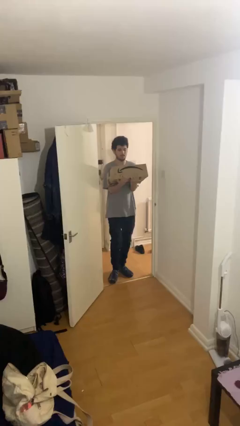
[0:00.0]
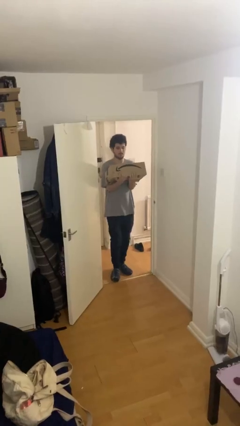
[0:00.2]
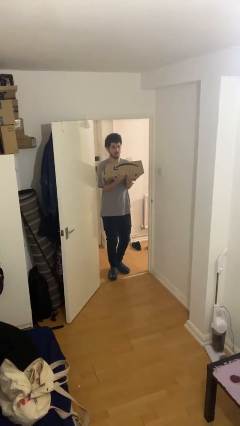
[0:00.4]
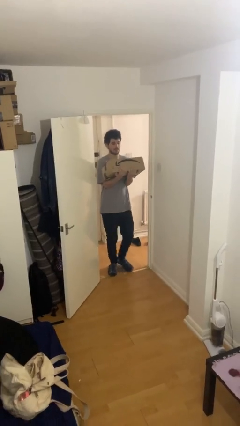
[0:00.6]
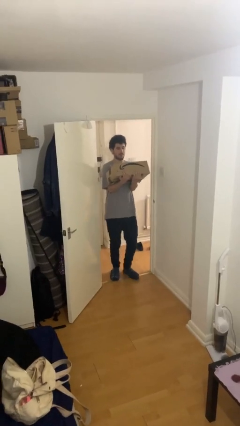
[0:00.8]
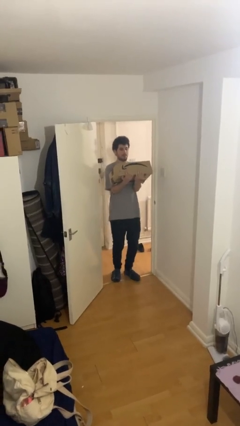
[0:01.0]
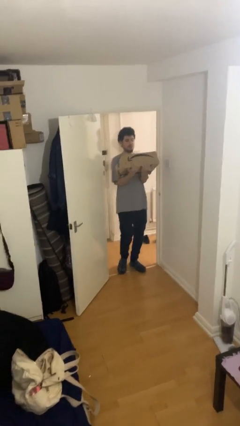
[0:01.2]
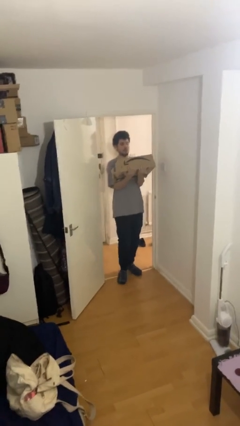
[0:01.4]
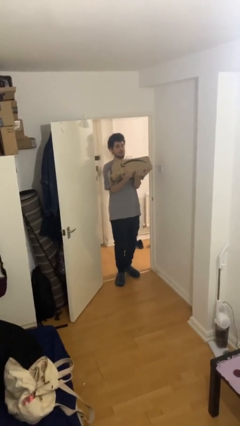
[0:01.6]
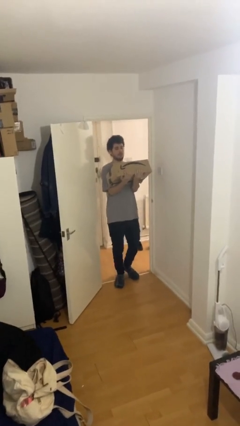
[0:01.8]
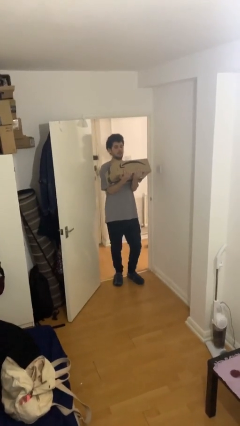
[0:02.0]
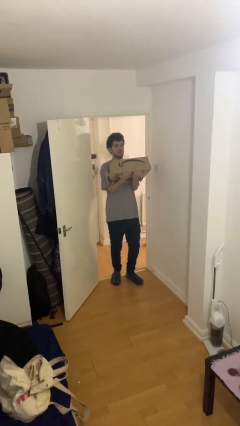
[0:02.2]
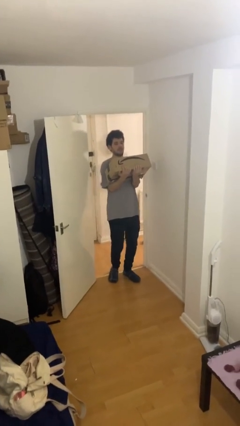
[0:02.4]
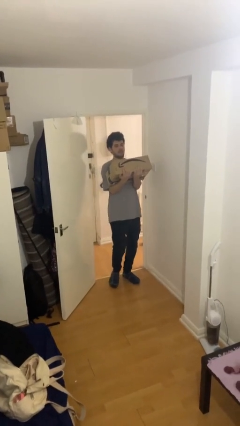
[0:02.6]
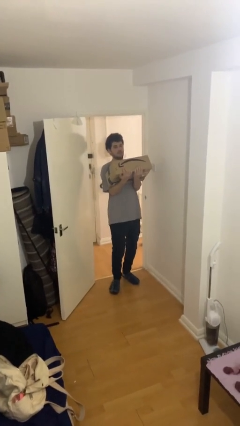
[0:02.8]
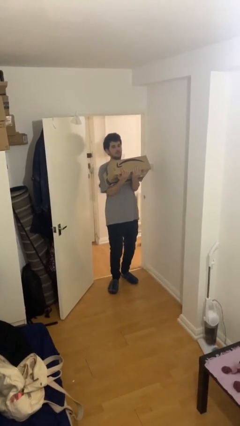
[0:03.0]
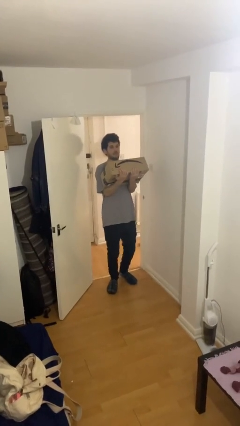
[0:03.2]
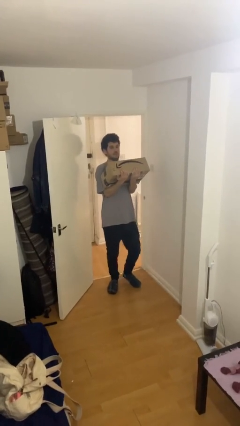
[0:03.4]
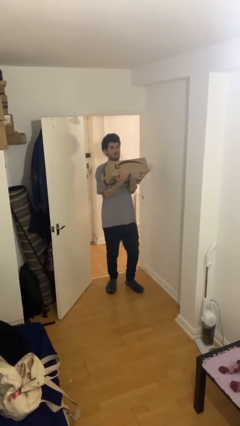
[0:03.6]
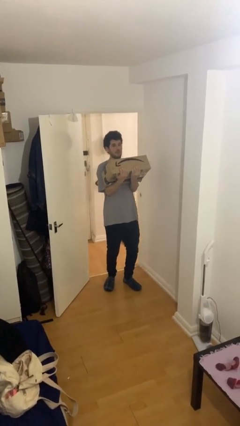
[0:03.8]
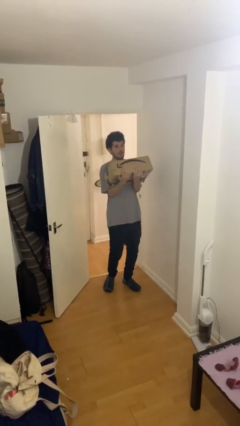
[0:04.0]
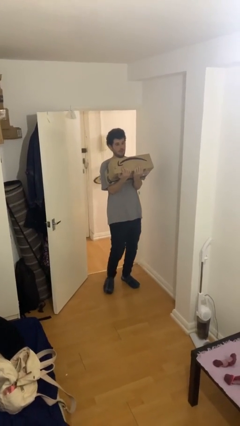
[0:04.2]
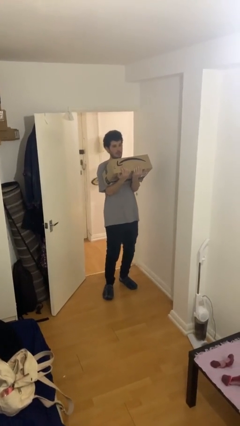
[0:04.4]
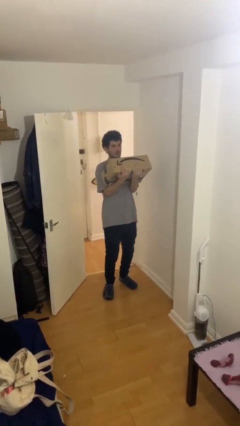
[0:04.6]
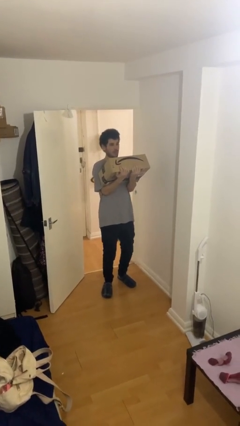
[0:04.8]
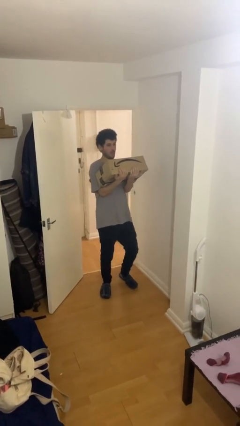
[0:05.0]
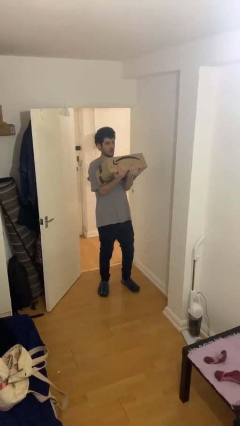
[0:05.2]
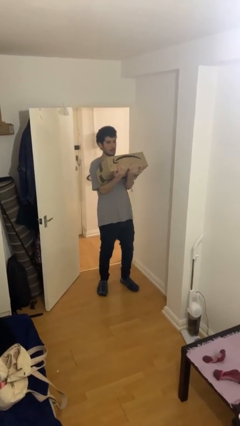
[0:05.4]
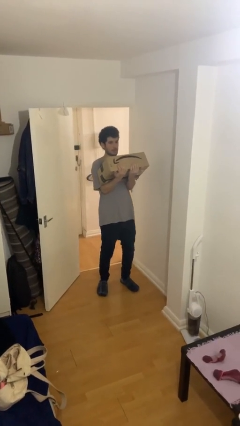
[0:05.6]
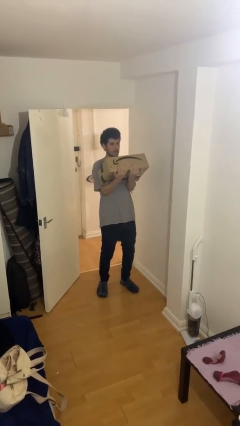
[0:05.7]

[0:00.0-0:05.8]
person carries heavy object

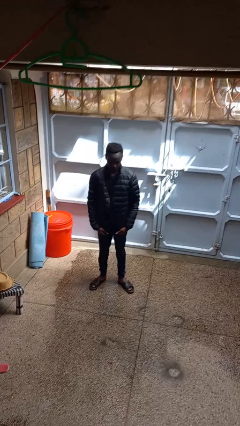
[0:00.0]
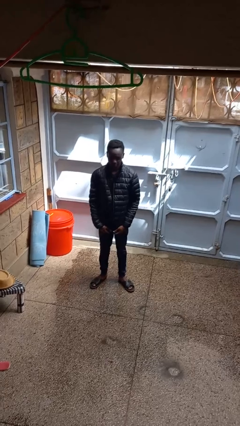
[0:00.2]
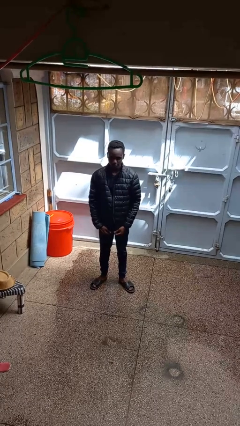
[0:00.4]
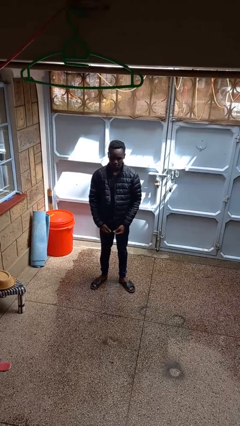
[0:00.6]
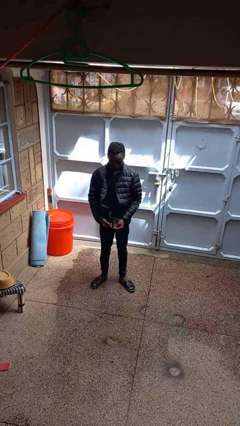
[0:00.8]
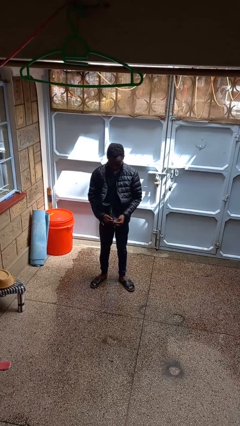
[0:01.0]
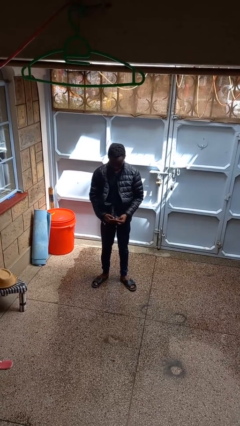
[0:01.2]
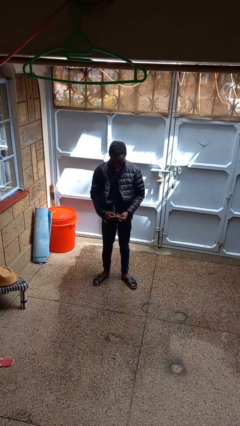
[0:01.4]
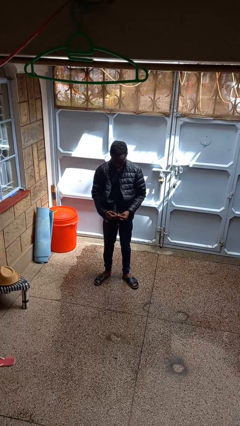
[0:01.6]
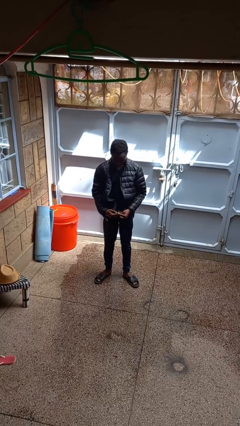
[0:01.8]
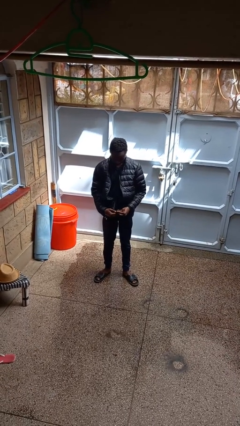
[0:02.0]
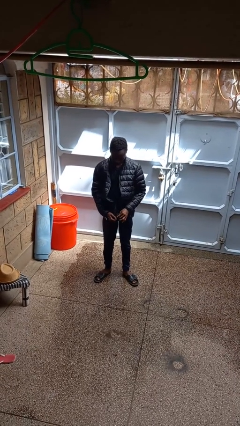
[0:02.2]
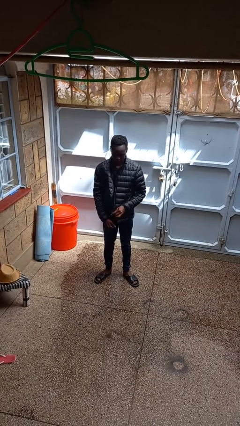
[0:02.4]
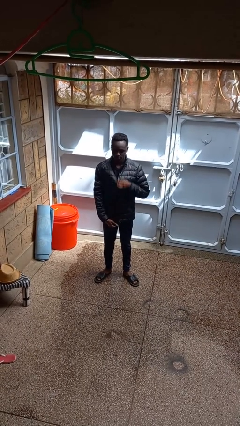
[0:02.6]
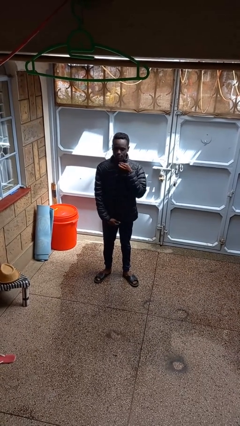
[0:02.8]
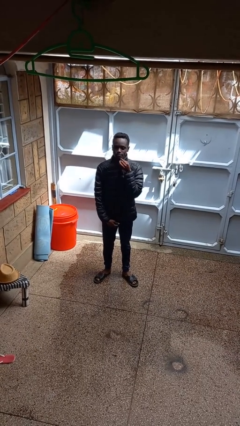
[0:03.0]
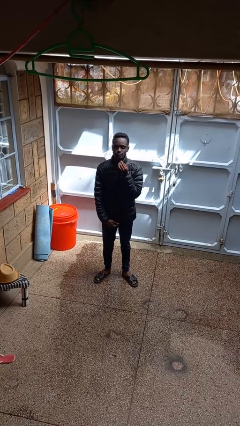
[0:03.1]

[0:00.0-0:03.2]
person zips up jacket

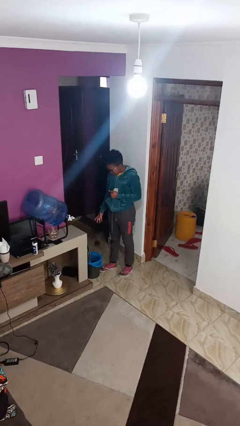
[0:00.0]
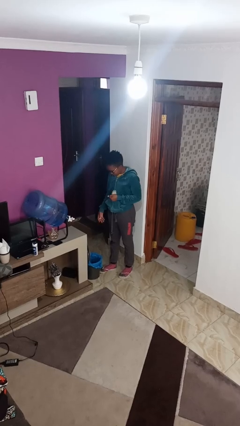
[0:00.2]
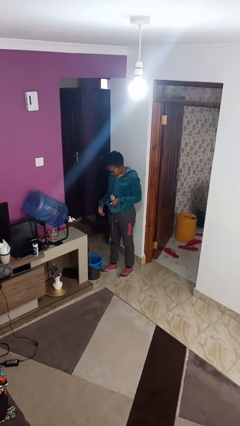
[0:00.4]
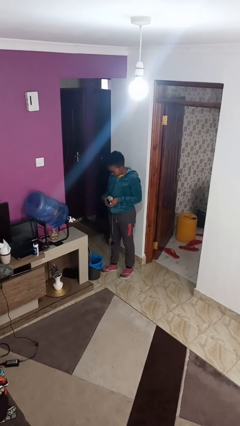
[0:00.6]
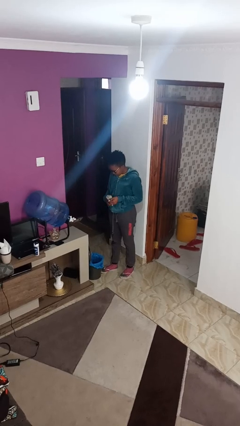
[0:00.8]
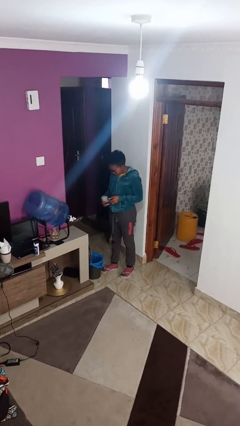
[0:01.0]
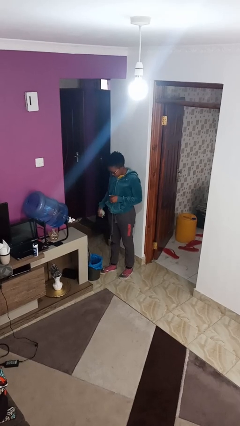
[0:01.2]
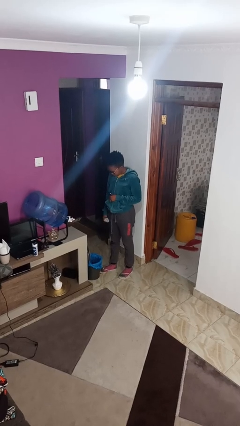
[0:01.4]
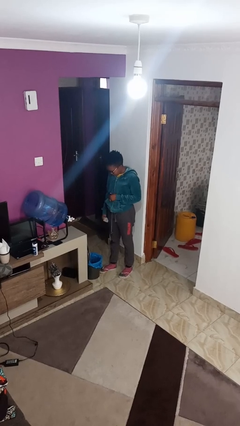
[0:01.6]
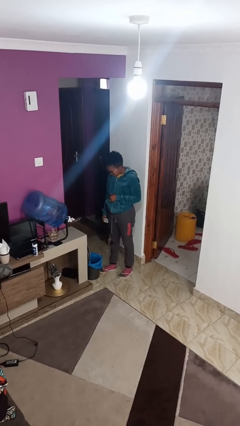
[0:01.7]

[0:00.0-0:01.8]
person discards trash

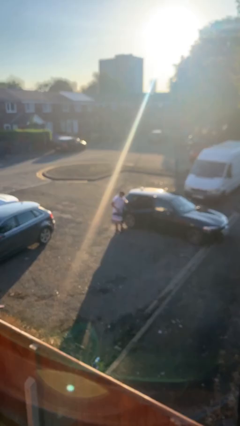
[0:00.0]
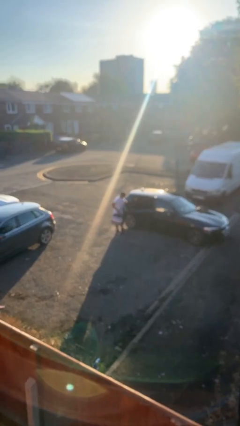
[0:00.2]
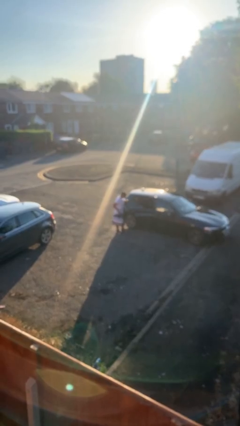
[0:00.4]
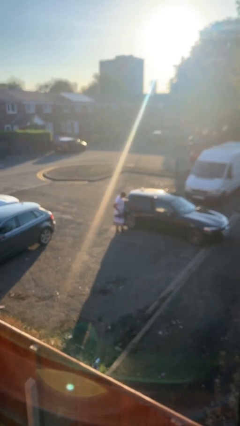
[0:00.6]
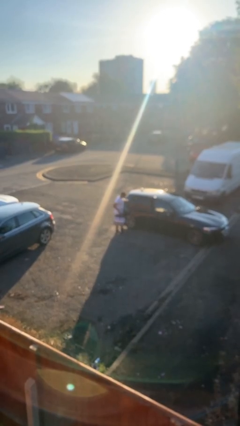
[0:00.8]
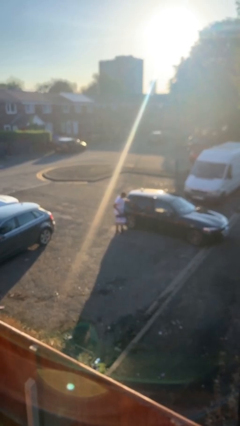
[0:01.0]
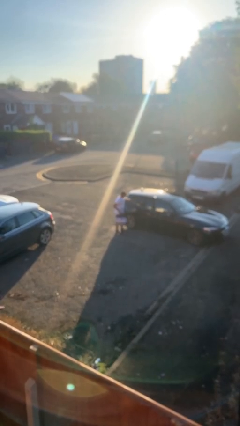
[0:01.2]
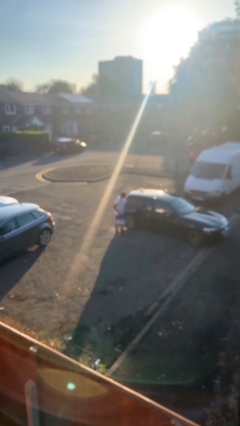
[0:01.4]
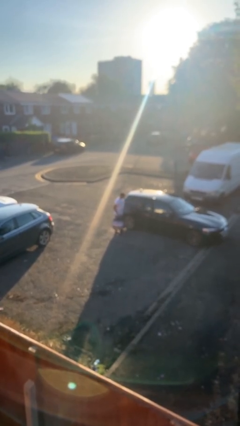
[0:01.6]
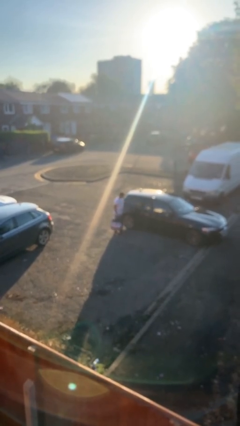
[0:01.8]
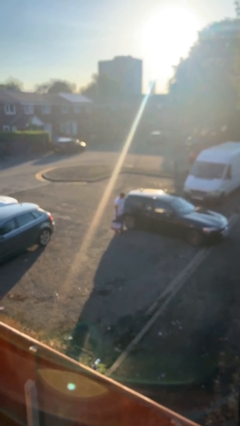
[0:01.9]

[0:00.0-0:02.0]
person closes car door

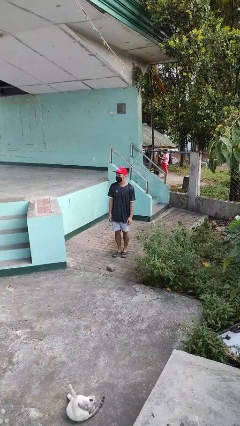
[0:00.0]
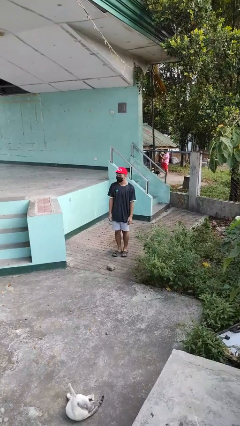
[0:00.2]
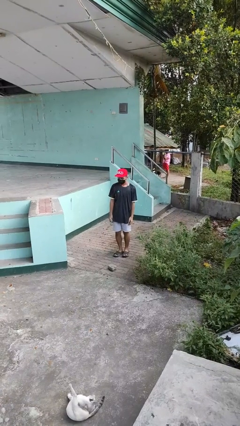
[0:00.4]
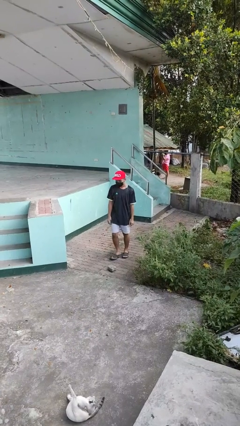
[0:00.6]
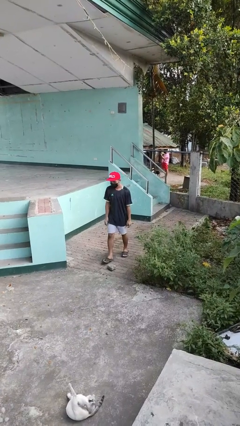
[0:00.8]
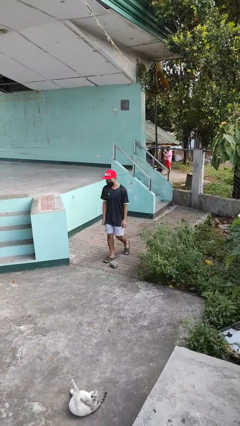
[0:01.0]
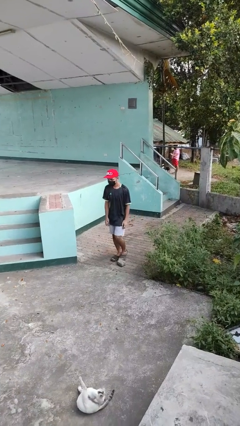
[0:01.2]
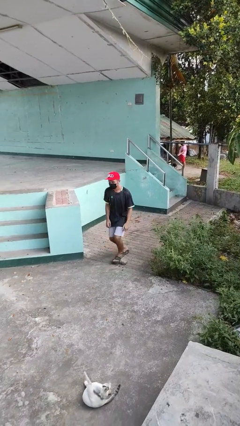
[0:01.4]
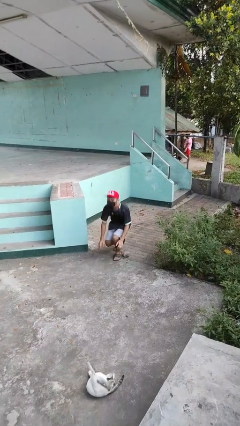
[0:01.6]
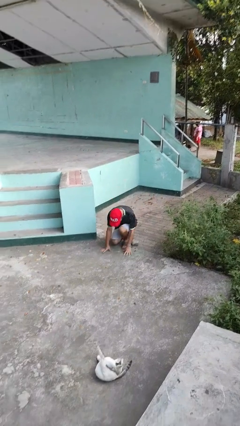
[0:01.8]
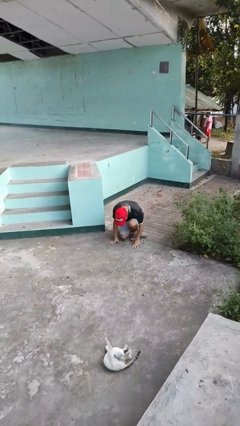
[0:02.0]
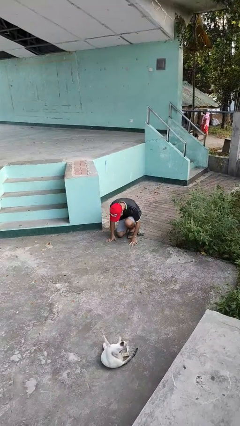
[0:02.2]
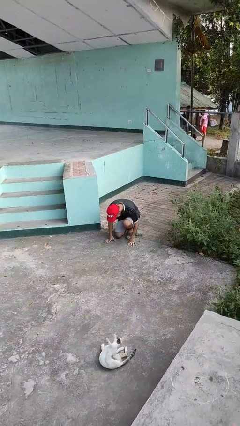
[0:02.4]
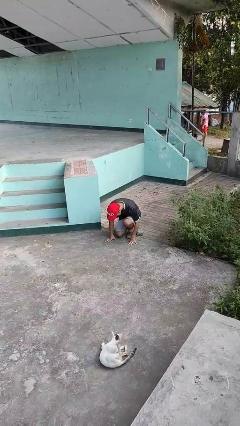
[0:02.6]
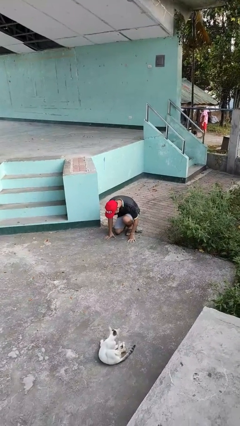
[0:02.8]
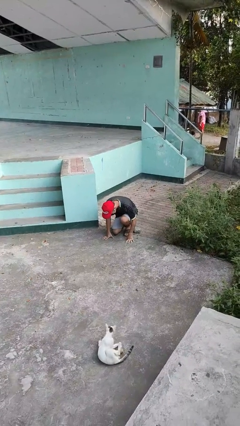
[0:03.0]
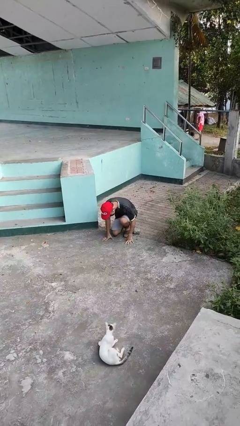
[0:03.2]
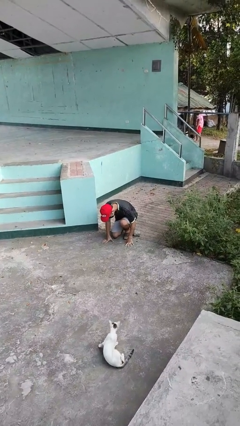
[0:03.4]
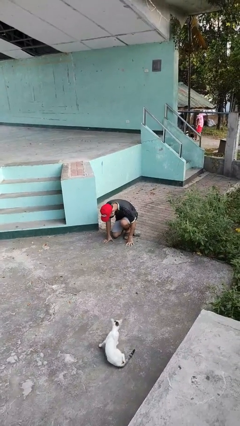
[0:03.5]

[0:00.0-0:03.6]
person trips on object on floor

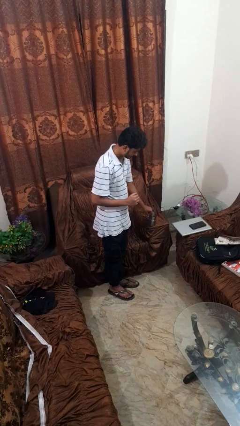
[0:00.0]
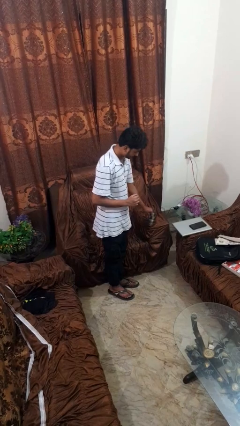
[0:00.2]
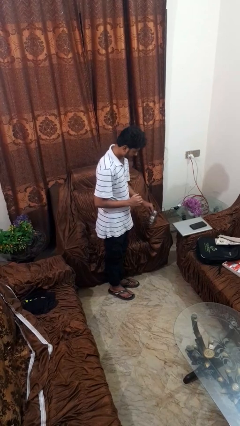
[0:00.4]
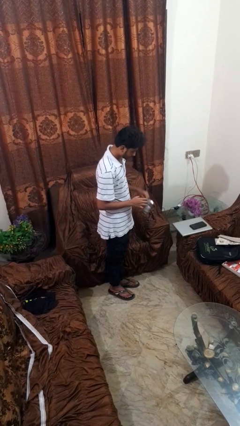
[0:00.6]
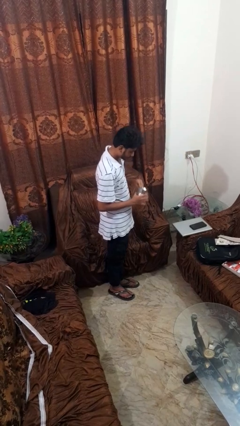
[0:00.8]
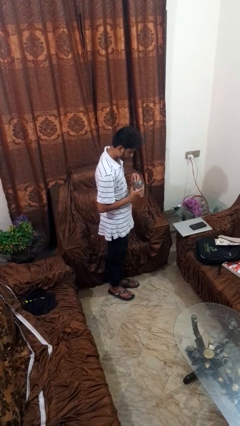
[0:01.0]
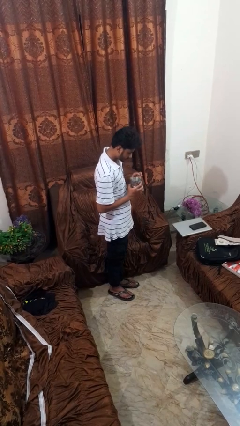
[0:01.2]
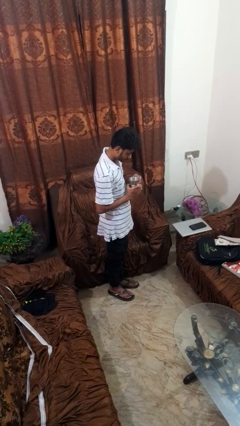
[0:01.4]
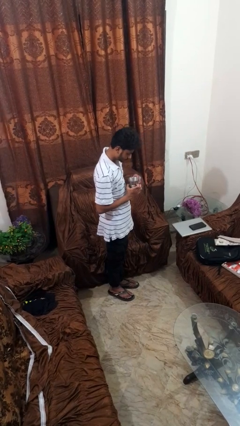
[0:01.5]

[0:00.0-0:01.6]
person picks up object from couch
